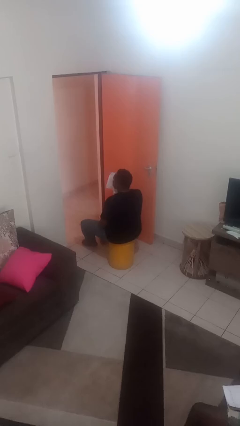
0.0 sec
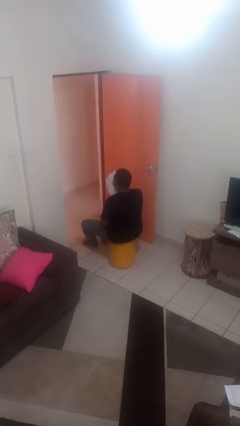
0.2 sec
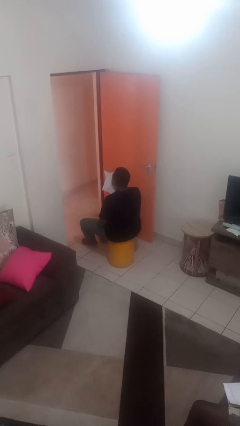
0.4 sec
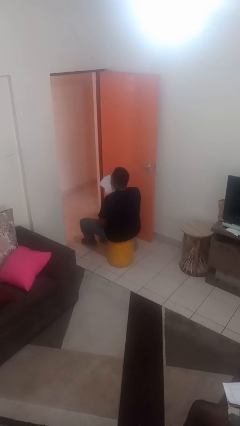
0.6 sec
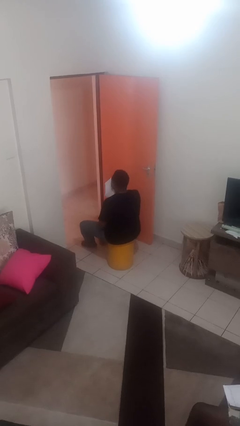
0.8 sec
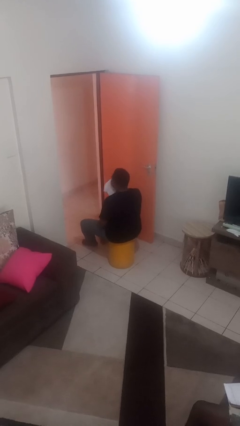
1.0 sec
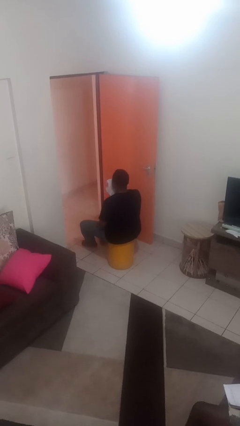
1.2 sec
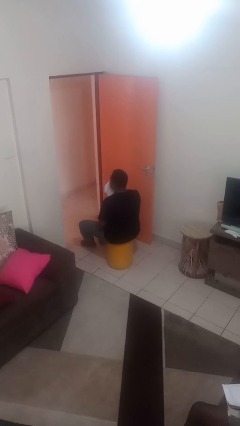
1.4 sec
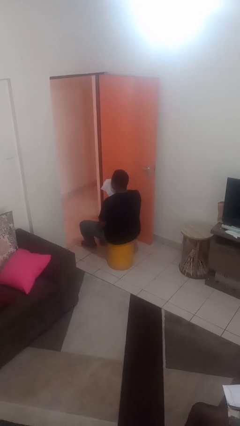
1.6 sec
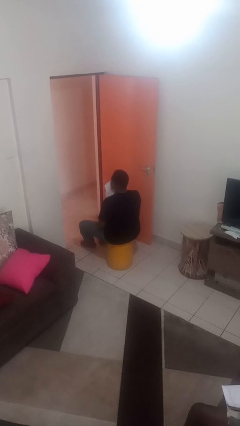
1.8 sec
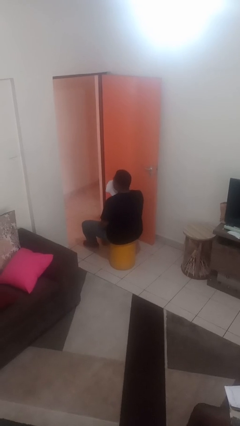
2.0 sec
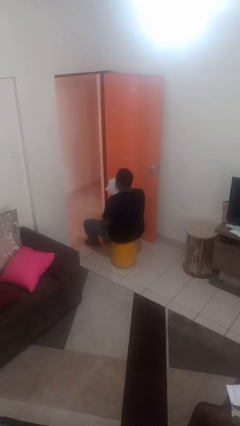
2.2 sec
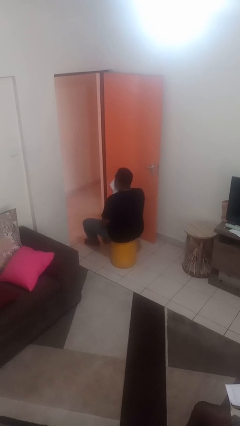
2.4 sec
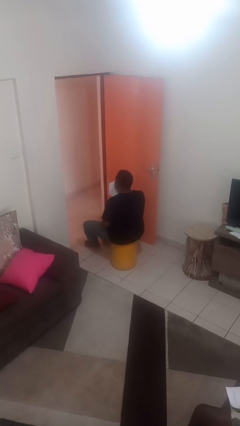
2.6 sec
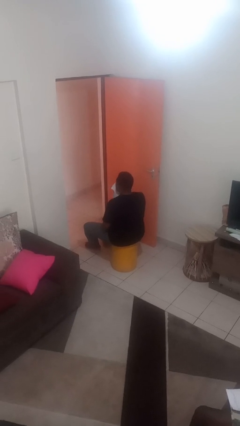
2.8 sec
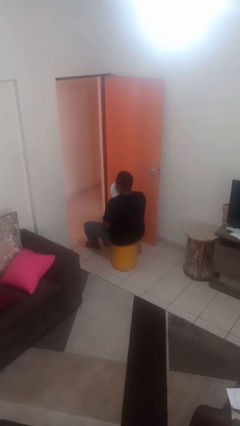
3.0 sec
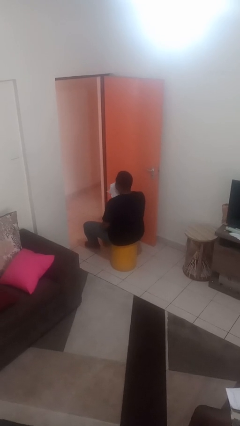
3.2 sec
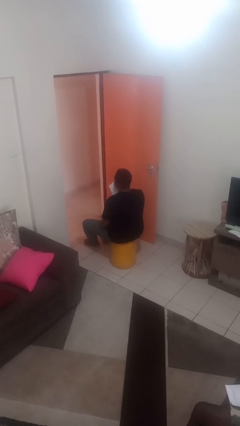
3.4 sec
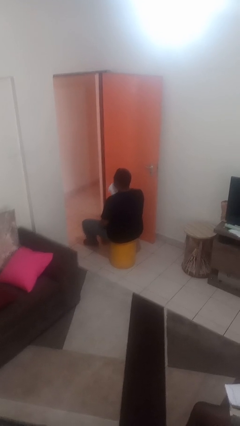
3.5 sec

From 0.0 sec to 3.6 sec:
person wipes mouth with napkin

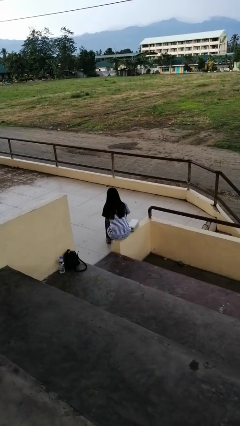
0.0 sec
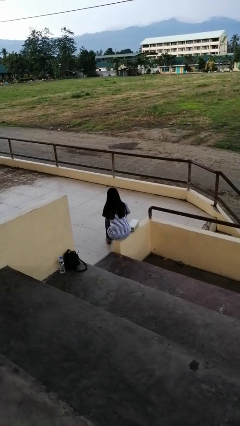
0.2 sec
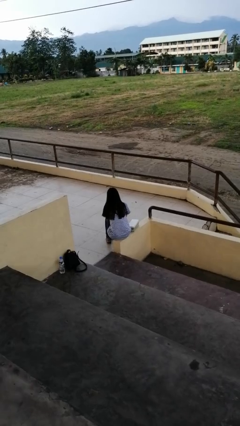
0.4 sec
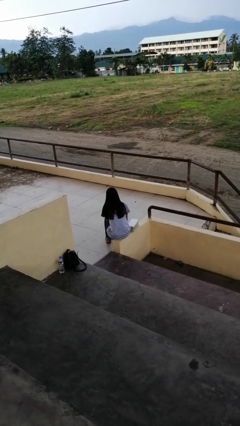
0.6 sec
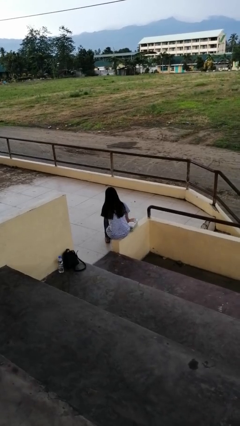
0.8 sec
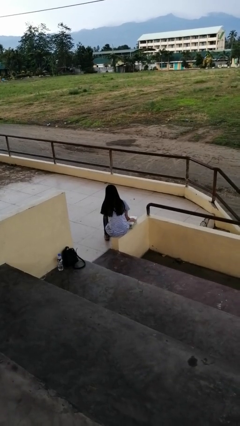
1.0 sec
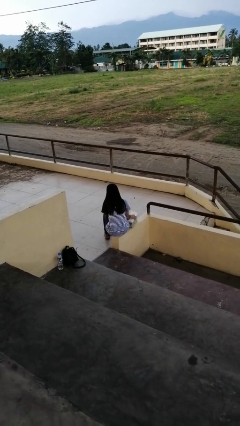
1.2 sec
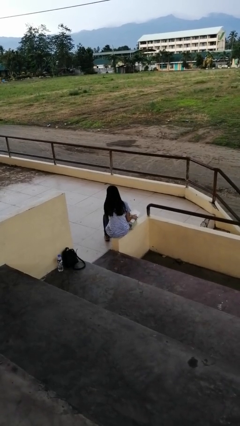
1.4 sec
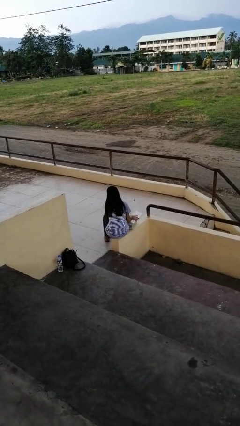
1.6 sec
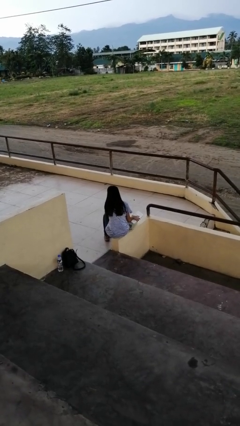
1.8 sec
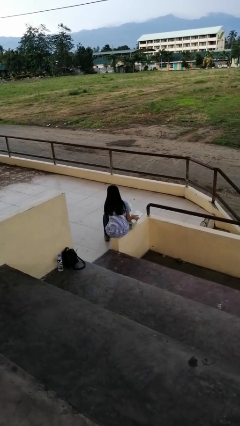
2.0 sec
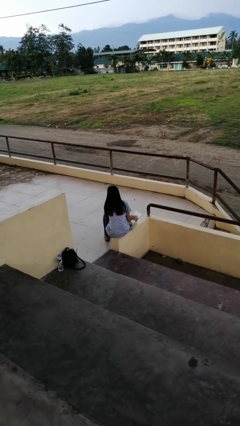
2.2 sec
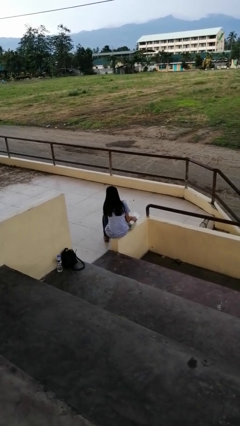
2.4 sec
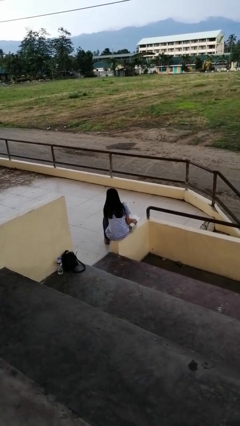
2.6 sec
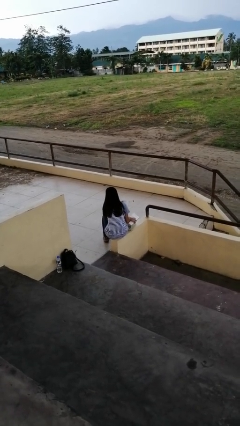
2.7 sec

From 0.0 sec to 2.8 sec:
person takes object from box

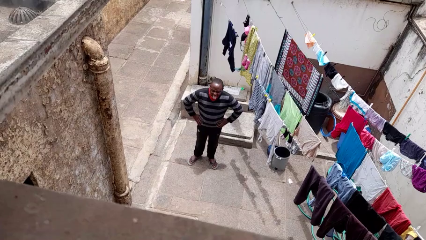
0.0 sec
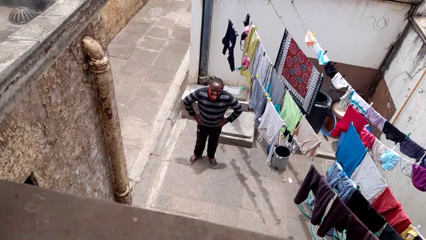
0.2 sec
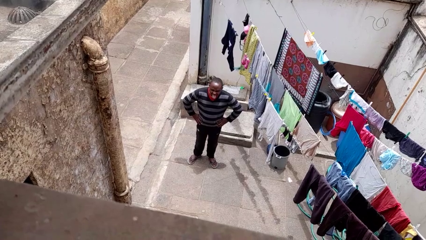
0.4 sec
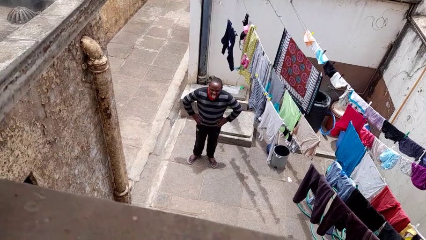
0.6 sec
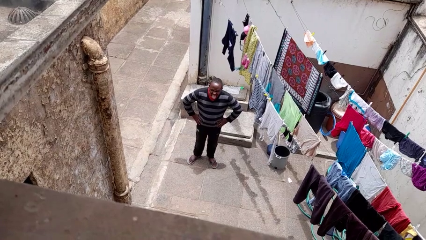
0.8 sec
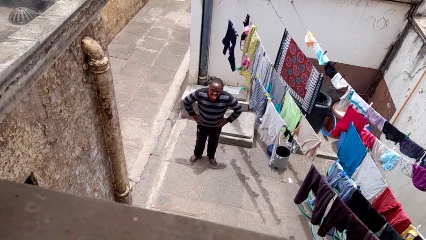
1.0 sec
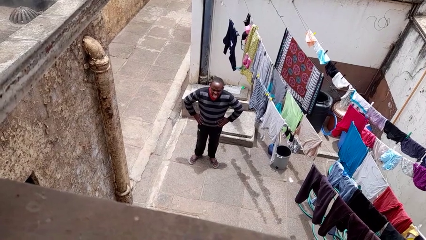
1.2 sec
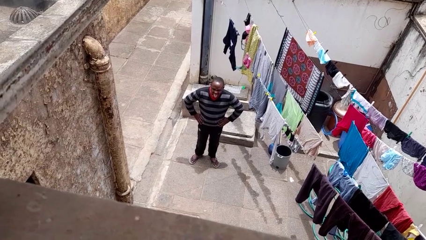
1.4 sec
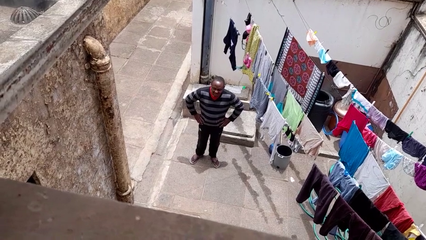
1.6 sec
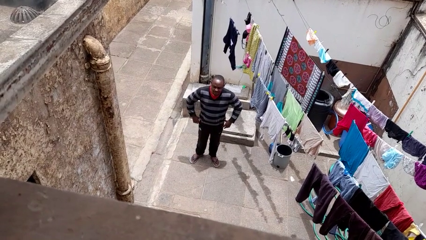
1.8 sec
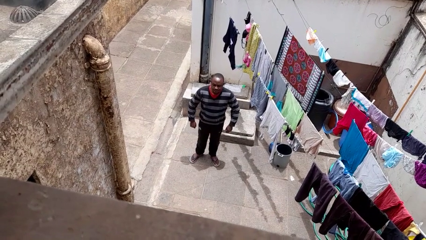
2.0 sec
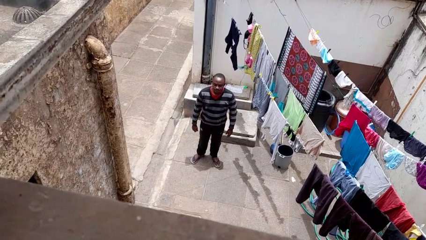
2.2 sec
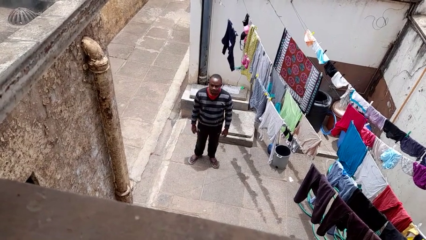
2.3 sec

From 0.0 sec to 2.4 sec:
person sticks out tongue

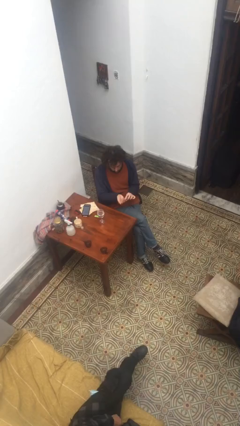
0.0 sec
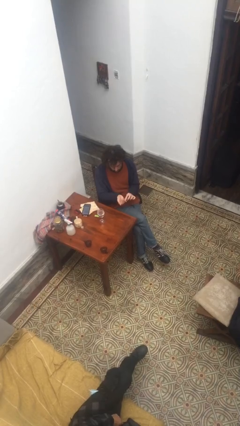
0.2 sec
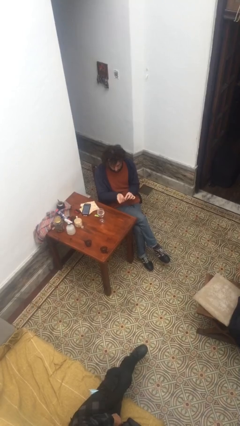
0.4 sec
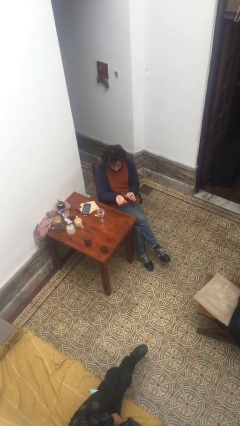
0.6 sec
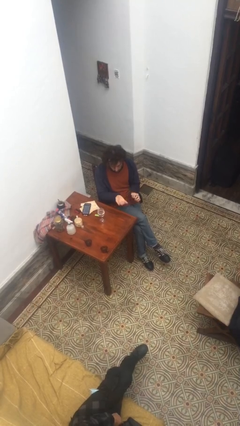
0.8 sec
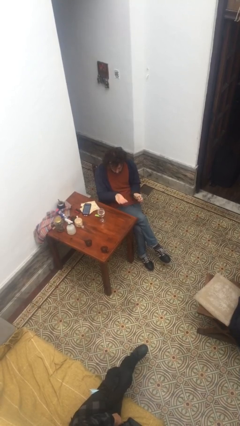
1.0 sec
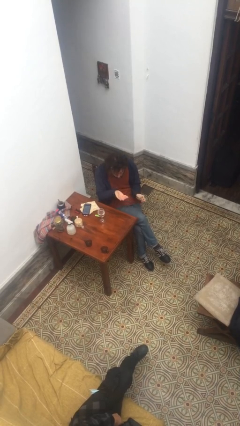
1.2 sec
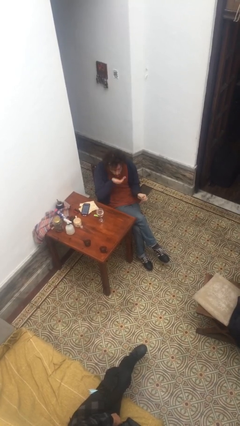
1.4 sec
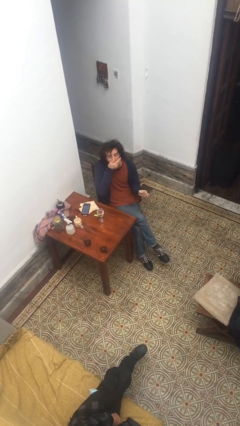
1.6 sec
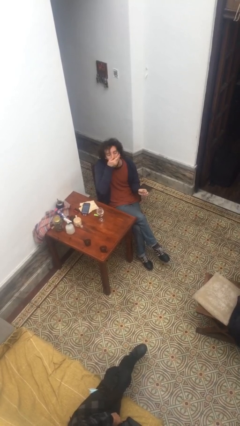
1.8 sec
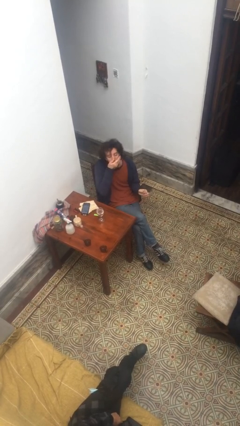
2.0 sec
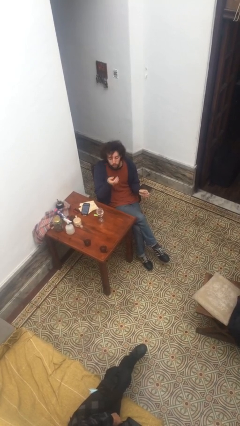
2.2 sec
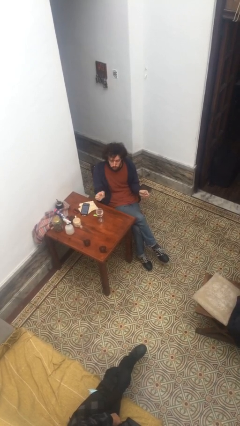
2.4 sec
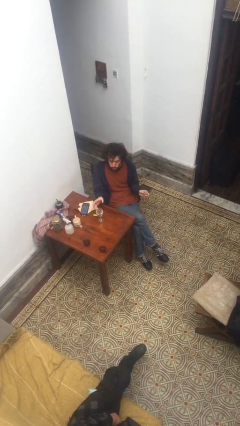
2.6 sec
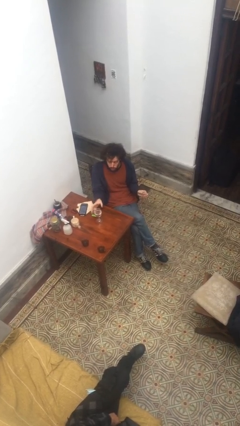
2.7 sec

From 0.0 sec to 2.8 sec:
person takes medicine pills

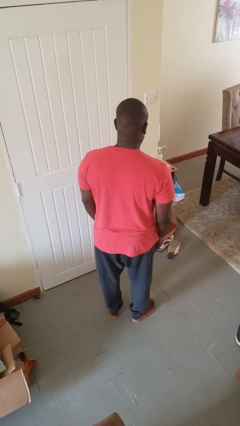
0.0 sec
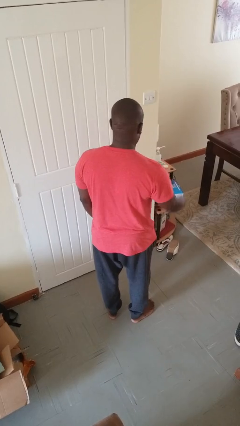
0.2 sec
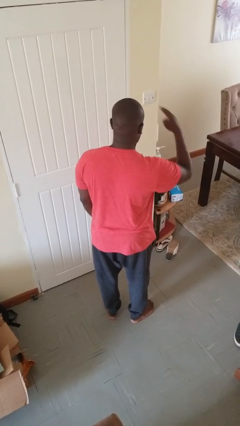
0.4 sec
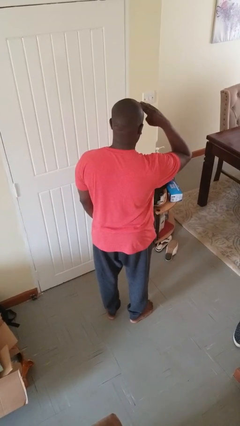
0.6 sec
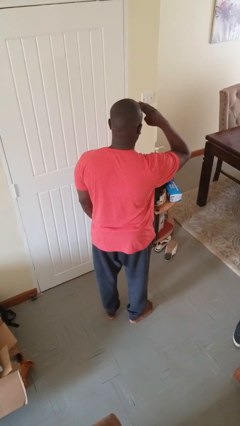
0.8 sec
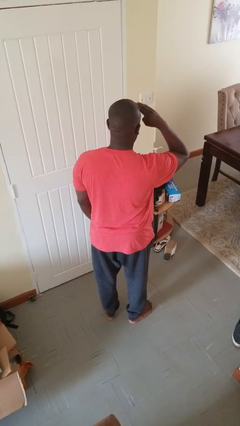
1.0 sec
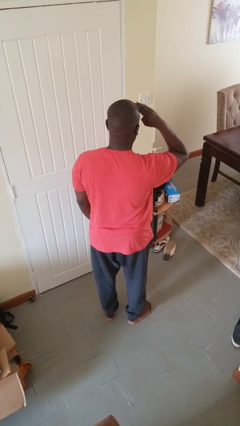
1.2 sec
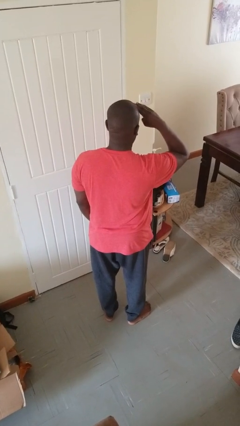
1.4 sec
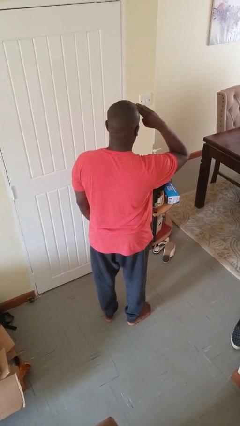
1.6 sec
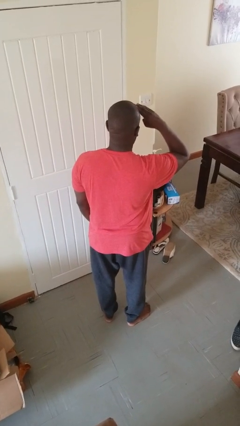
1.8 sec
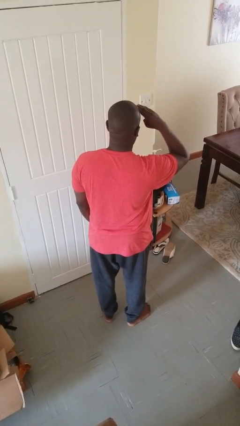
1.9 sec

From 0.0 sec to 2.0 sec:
person salutes

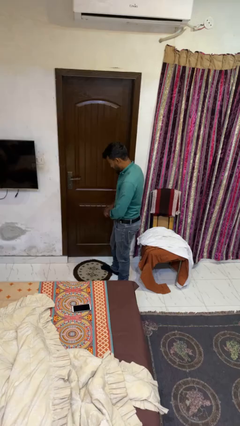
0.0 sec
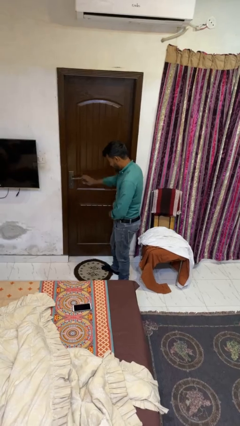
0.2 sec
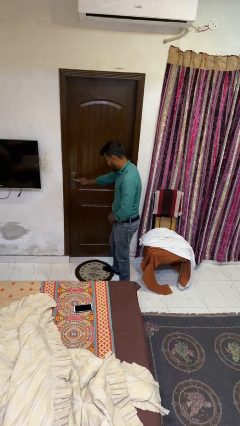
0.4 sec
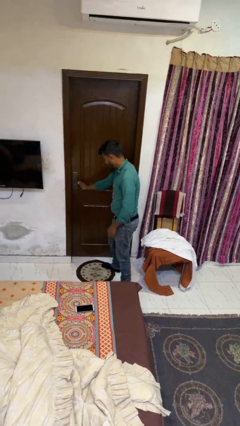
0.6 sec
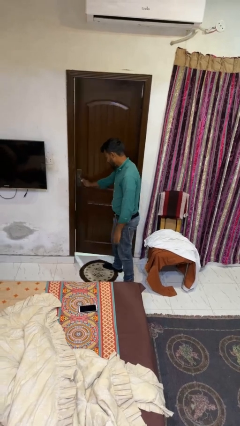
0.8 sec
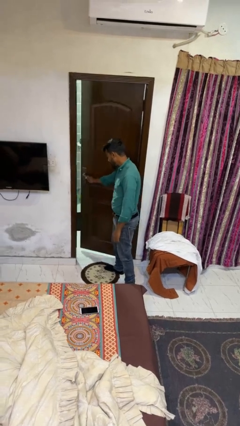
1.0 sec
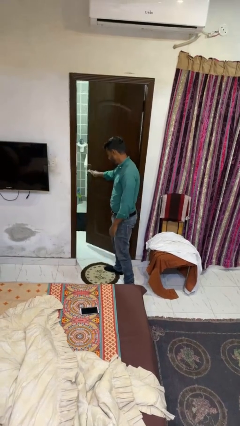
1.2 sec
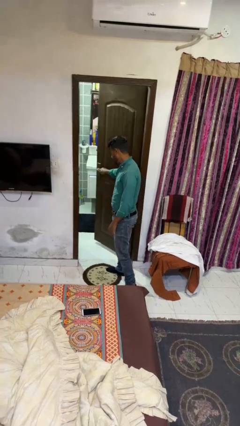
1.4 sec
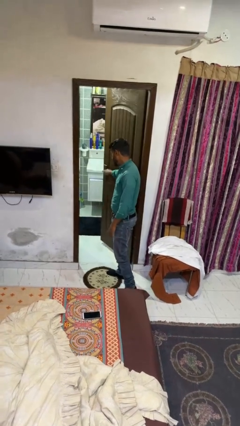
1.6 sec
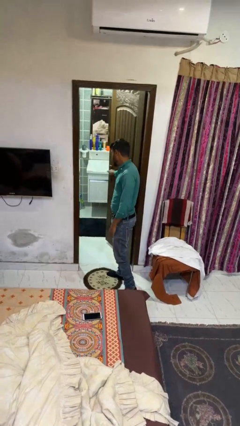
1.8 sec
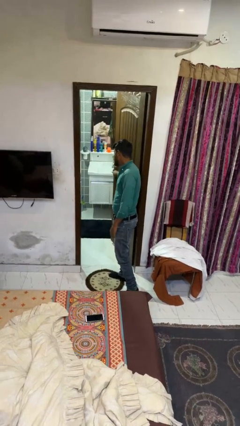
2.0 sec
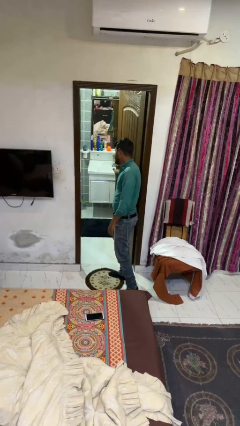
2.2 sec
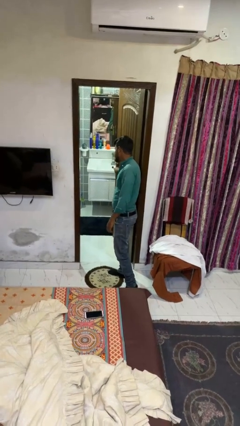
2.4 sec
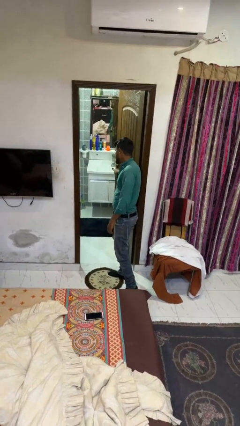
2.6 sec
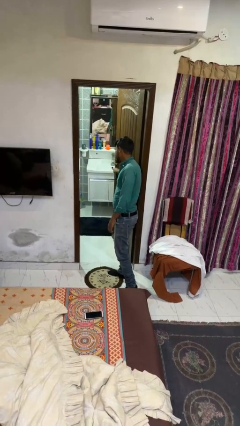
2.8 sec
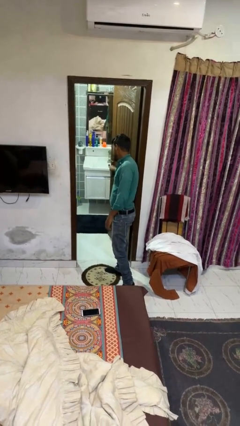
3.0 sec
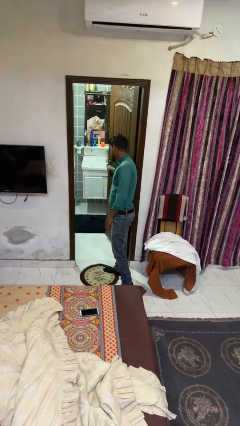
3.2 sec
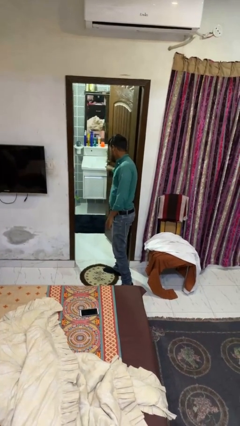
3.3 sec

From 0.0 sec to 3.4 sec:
person opens facility door

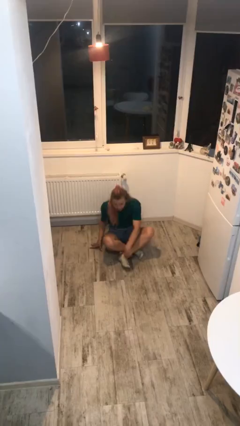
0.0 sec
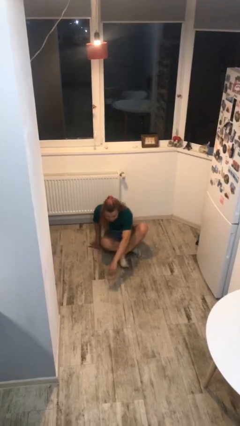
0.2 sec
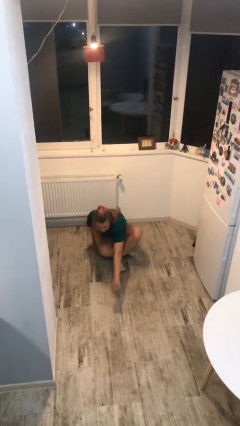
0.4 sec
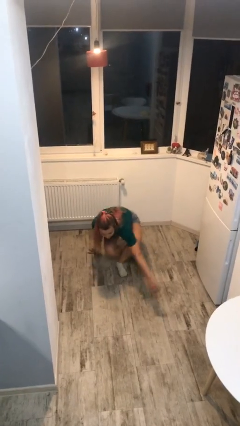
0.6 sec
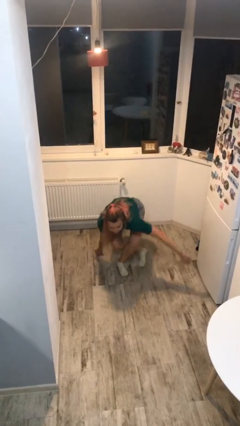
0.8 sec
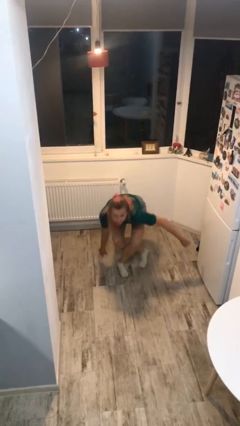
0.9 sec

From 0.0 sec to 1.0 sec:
person stands up from floor
